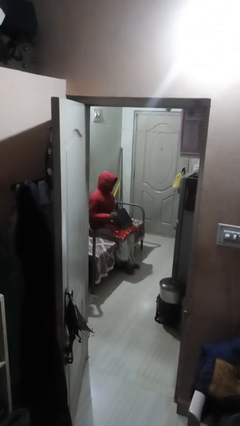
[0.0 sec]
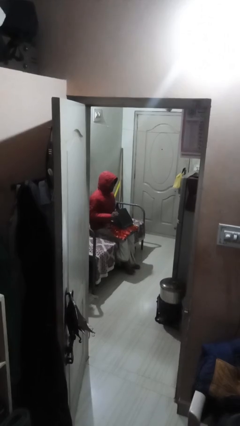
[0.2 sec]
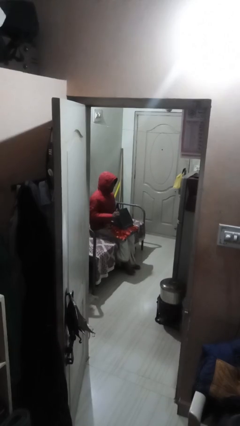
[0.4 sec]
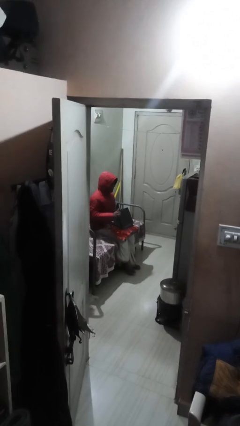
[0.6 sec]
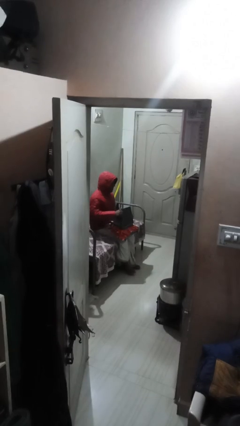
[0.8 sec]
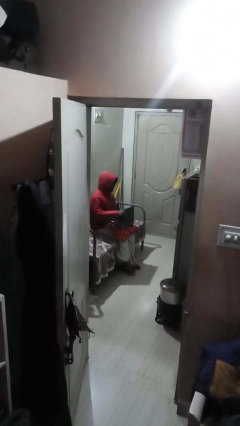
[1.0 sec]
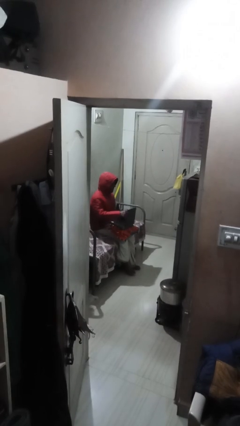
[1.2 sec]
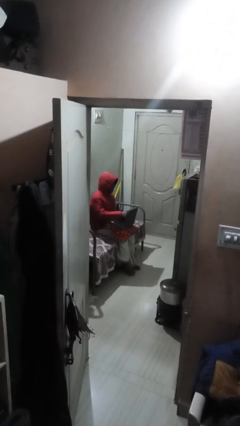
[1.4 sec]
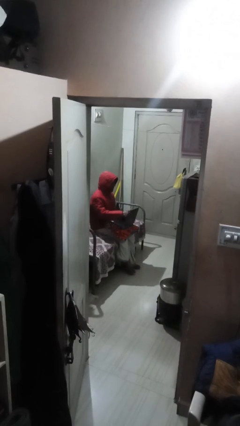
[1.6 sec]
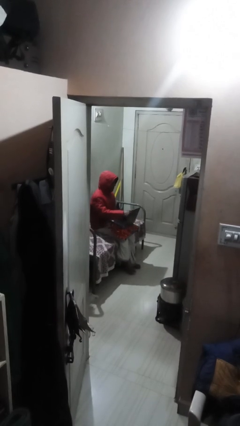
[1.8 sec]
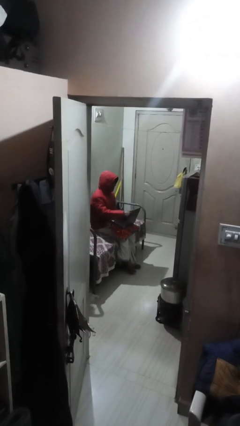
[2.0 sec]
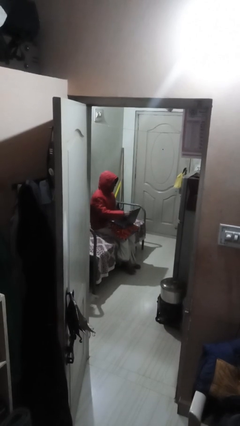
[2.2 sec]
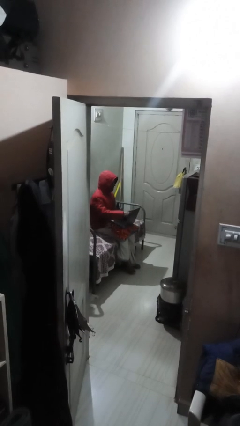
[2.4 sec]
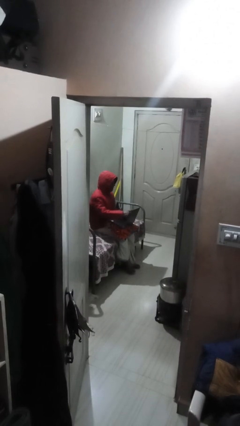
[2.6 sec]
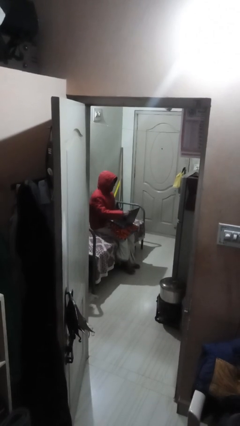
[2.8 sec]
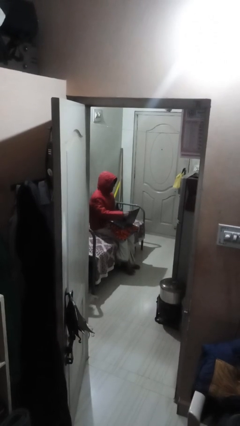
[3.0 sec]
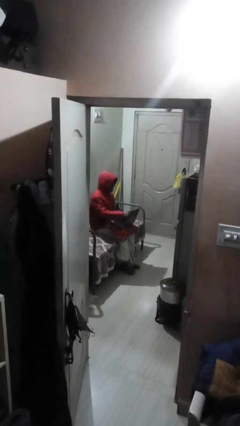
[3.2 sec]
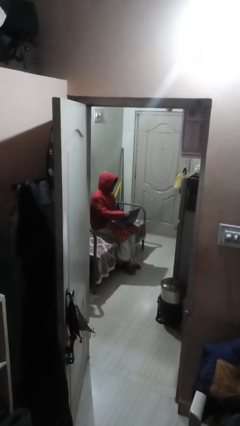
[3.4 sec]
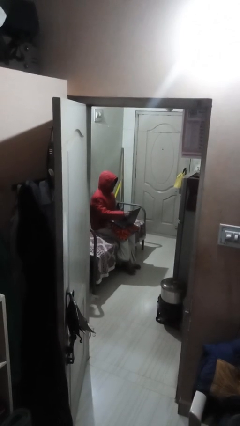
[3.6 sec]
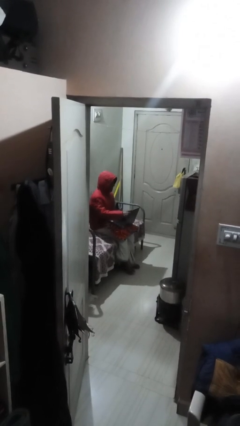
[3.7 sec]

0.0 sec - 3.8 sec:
person interacts with laptop

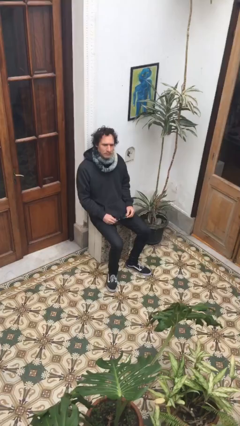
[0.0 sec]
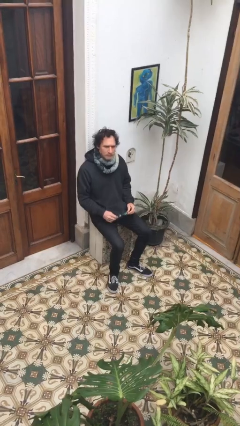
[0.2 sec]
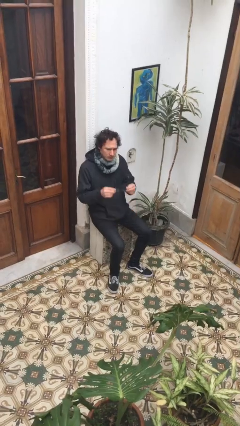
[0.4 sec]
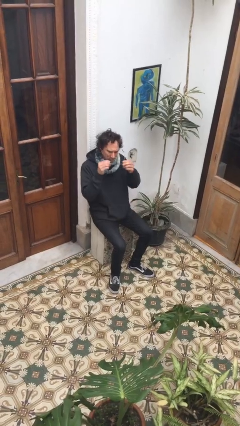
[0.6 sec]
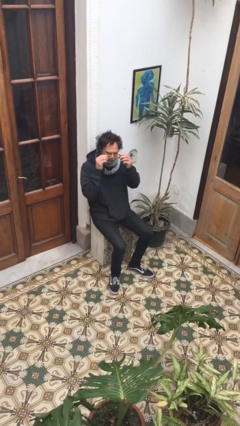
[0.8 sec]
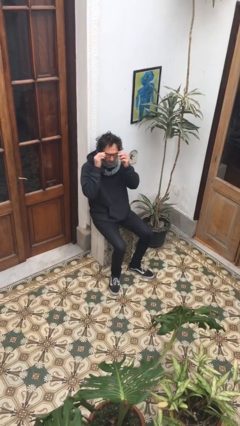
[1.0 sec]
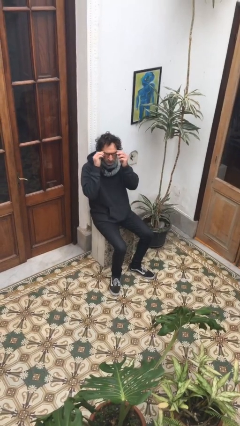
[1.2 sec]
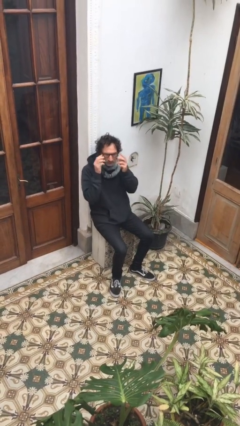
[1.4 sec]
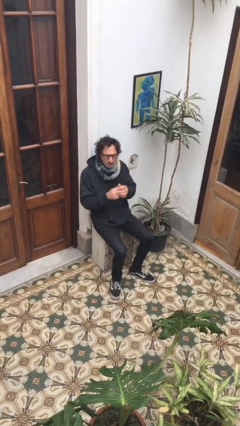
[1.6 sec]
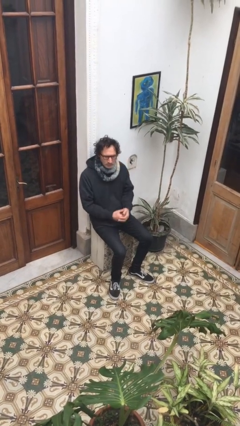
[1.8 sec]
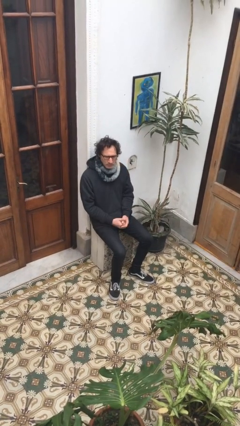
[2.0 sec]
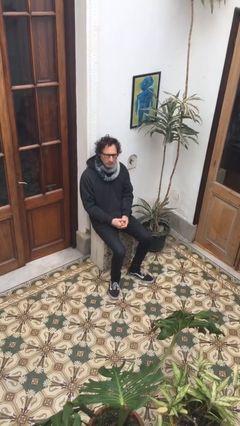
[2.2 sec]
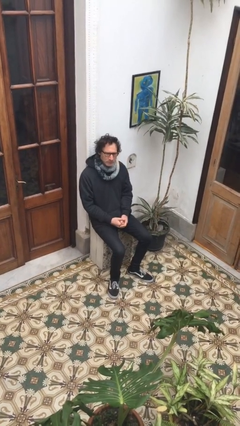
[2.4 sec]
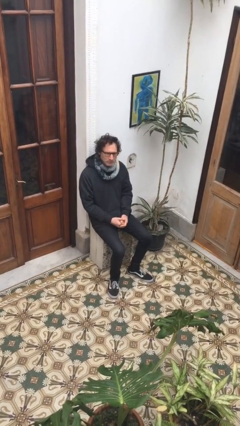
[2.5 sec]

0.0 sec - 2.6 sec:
person puts on glasses

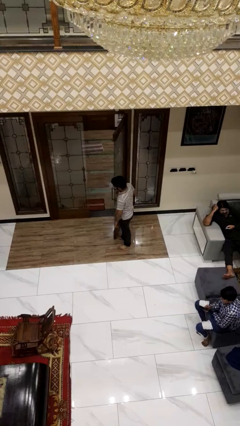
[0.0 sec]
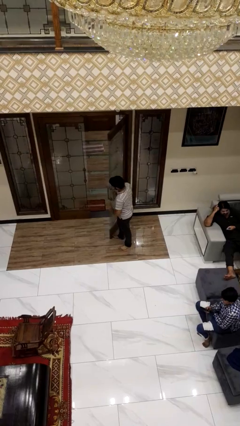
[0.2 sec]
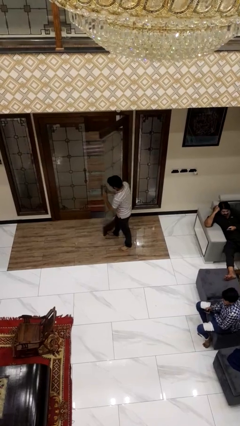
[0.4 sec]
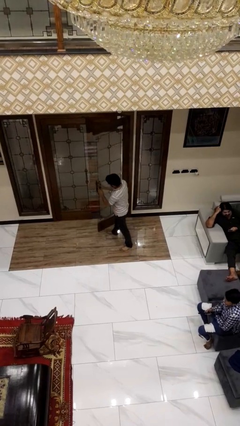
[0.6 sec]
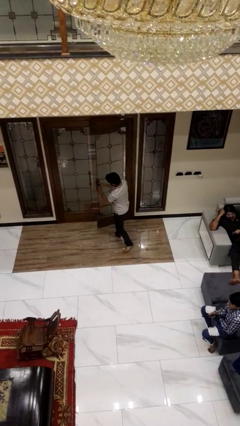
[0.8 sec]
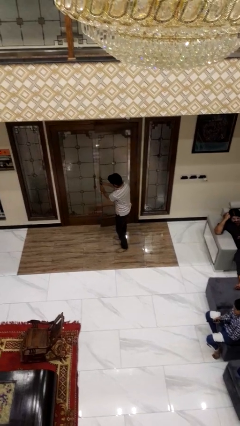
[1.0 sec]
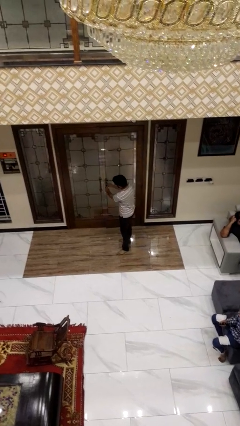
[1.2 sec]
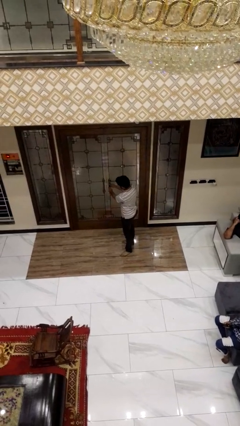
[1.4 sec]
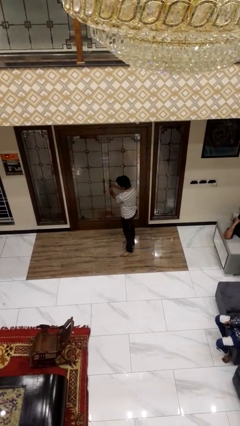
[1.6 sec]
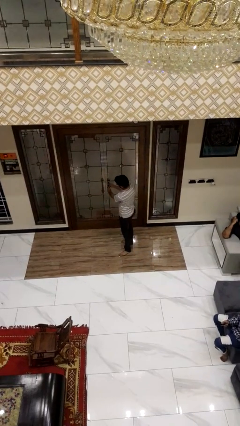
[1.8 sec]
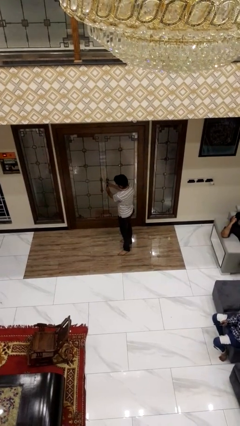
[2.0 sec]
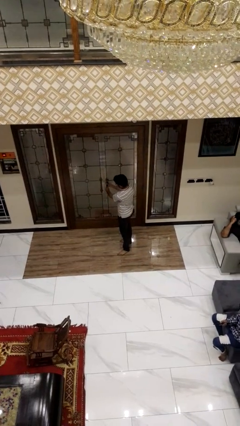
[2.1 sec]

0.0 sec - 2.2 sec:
person closes facility door

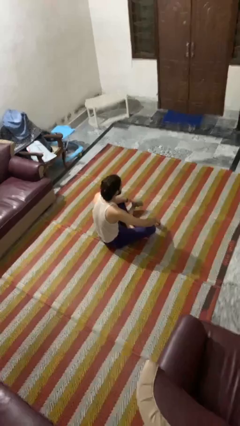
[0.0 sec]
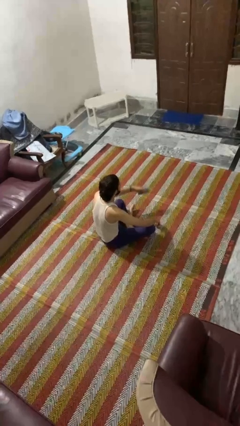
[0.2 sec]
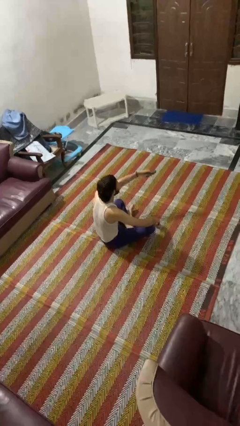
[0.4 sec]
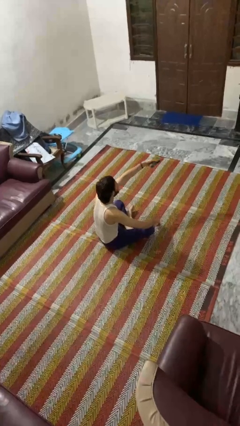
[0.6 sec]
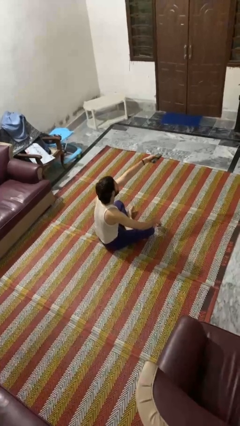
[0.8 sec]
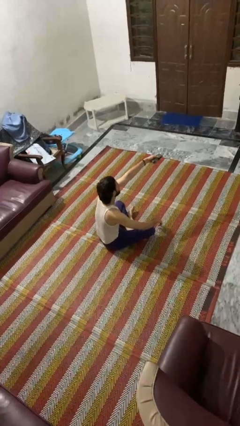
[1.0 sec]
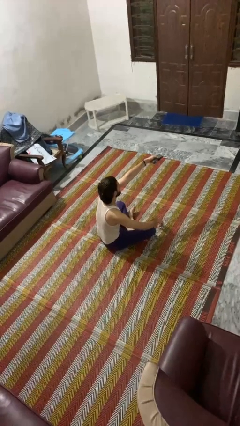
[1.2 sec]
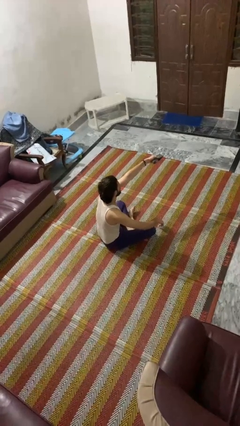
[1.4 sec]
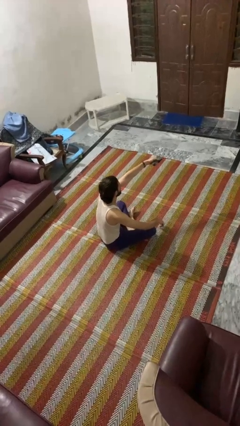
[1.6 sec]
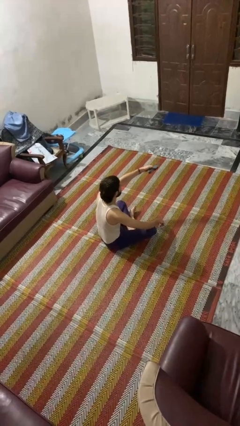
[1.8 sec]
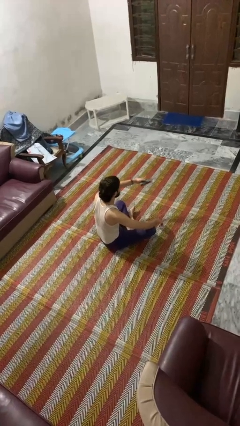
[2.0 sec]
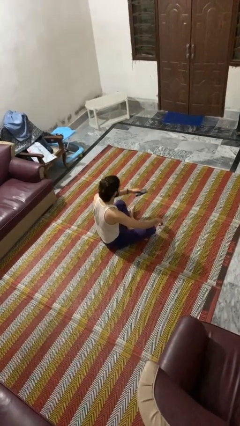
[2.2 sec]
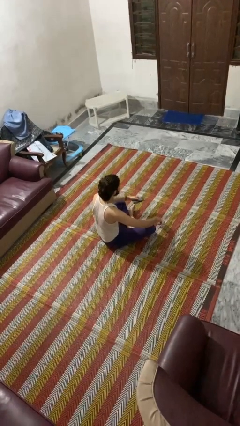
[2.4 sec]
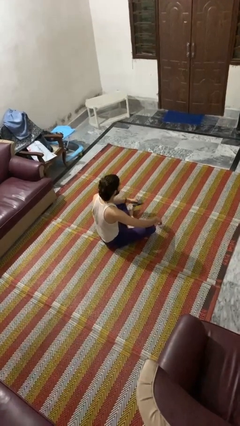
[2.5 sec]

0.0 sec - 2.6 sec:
person uses television remote

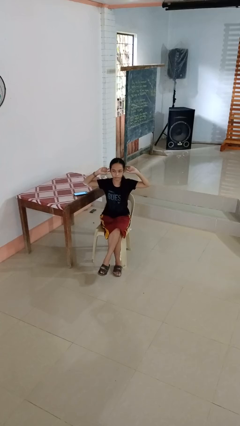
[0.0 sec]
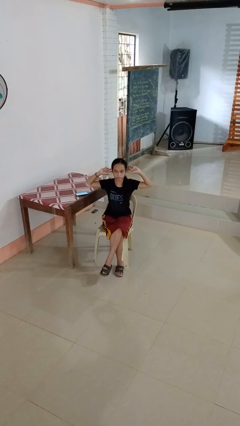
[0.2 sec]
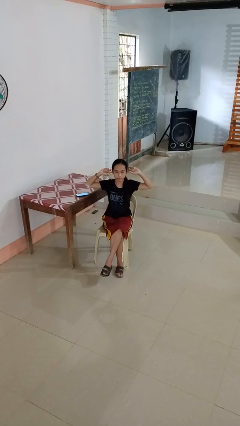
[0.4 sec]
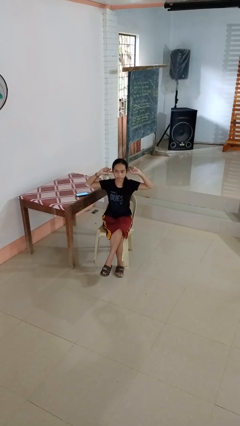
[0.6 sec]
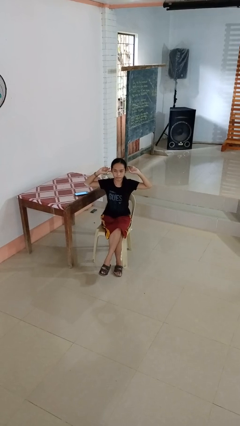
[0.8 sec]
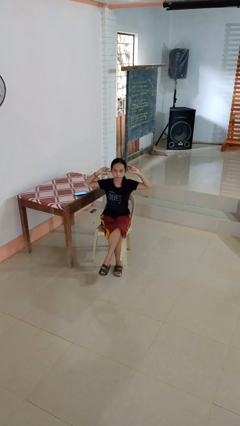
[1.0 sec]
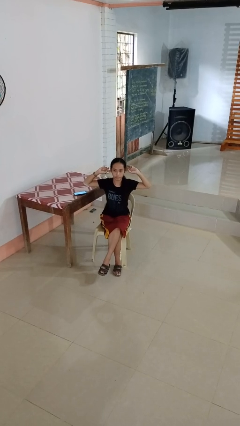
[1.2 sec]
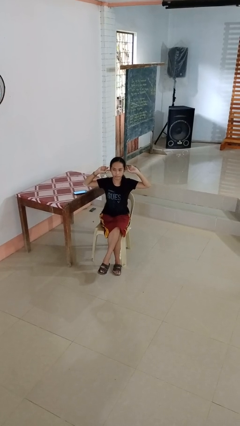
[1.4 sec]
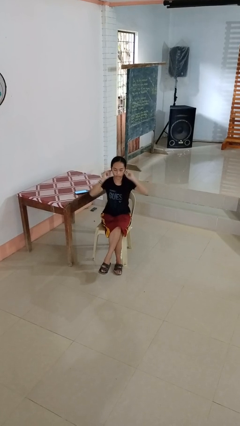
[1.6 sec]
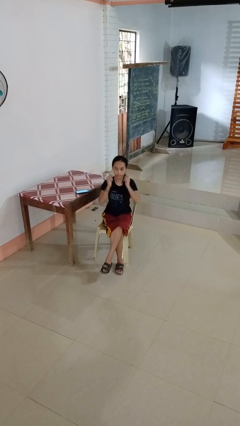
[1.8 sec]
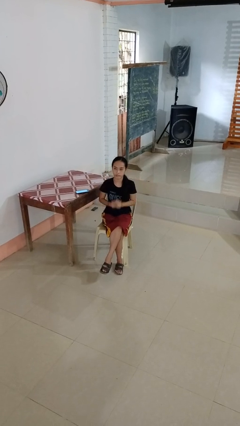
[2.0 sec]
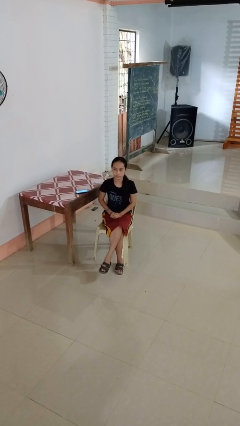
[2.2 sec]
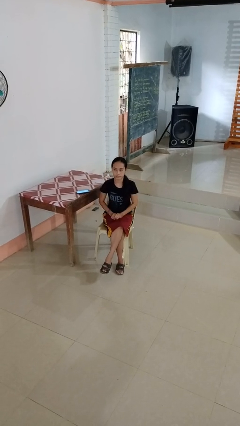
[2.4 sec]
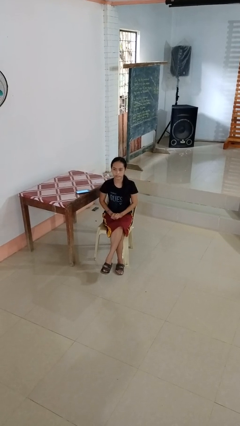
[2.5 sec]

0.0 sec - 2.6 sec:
person puts fingers in ear

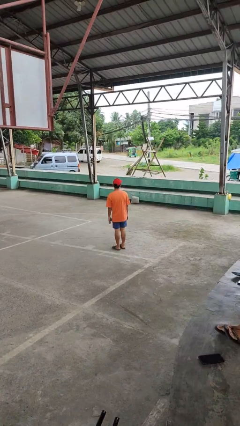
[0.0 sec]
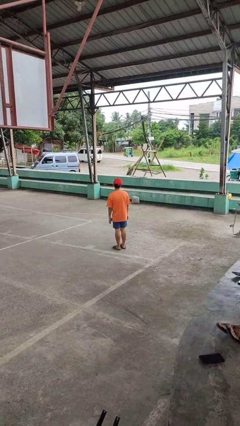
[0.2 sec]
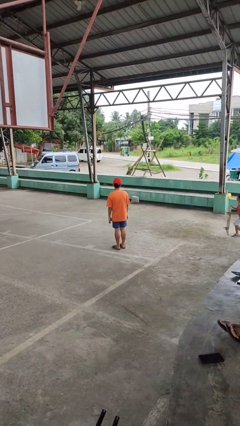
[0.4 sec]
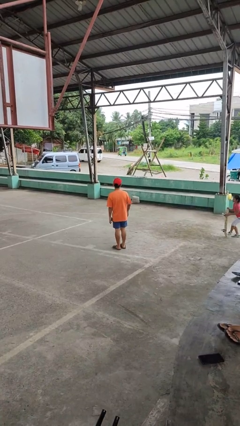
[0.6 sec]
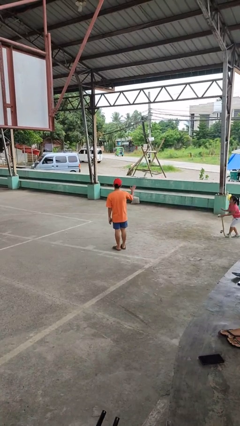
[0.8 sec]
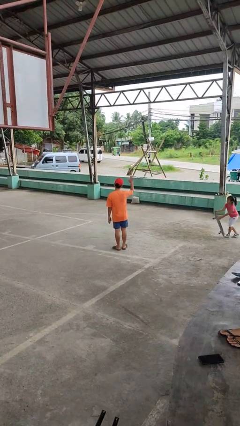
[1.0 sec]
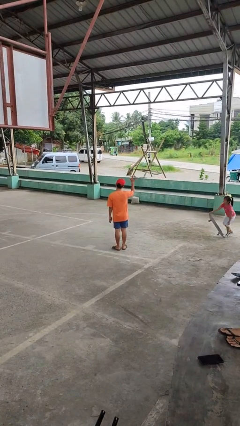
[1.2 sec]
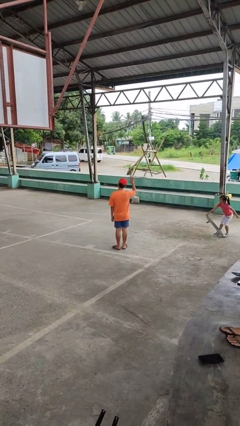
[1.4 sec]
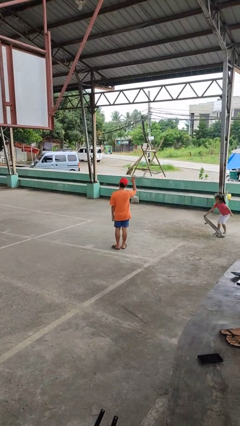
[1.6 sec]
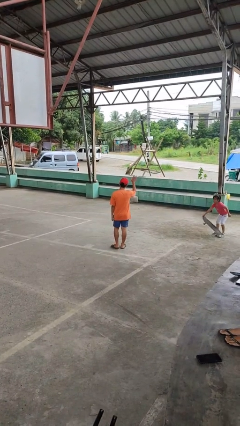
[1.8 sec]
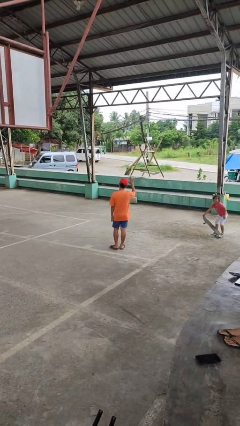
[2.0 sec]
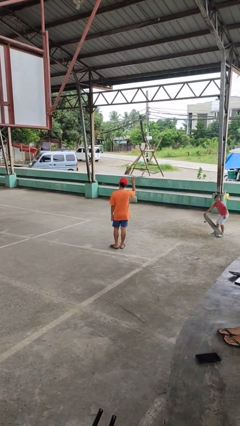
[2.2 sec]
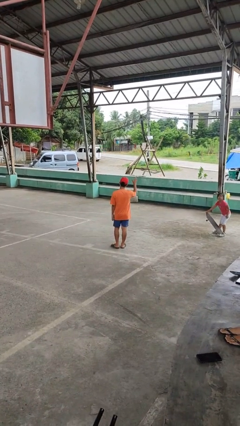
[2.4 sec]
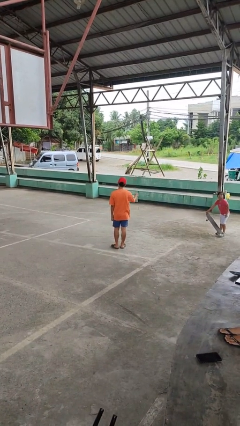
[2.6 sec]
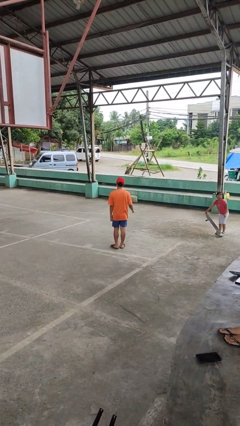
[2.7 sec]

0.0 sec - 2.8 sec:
person waves at person

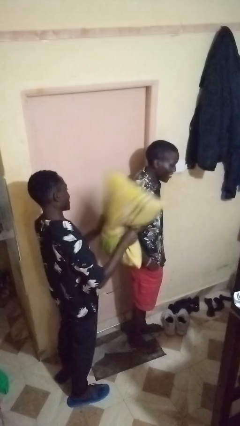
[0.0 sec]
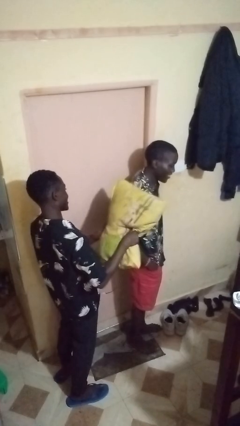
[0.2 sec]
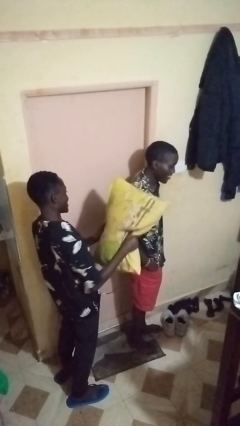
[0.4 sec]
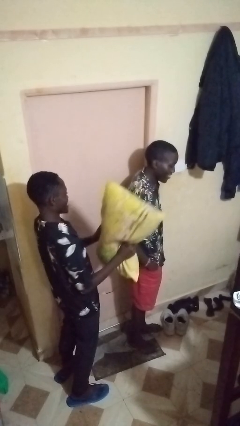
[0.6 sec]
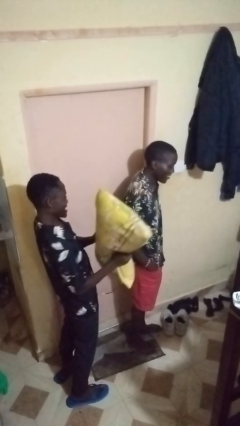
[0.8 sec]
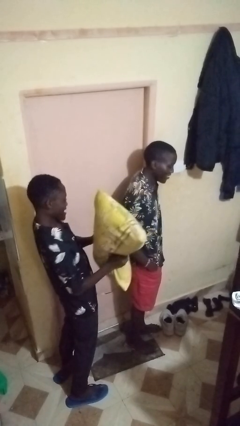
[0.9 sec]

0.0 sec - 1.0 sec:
person hits person with pillow
